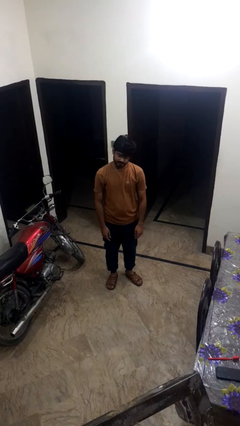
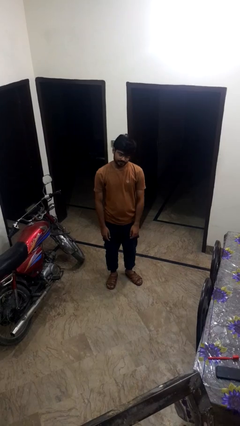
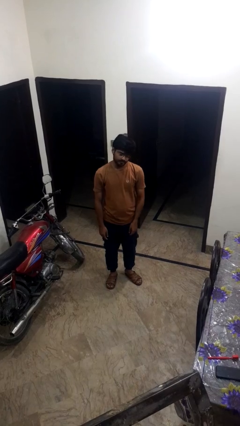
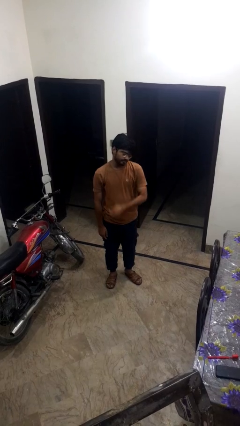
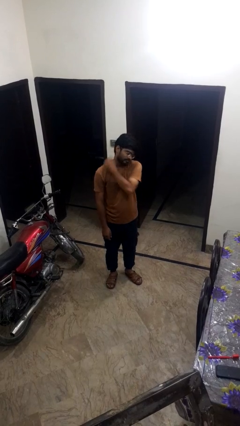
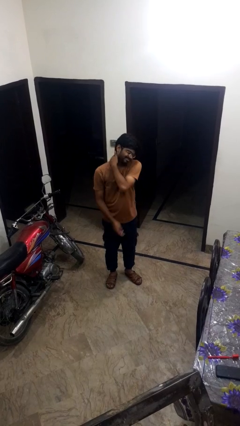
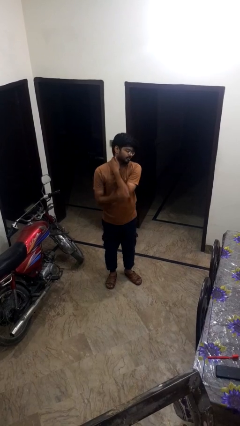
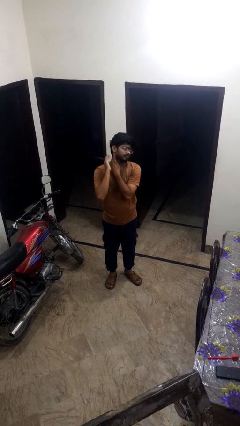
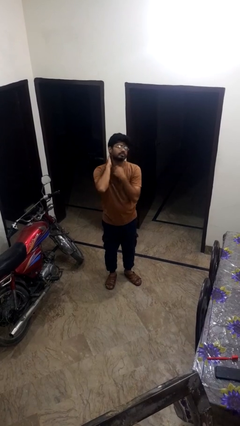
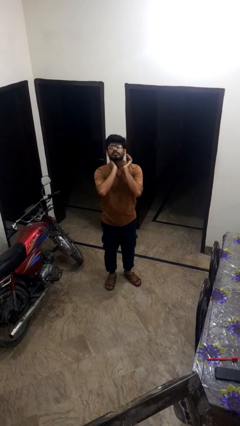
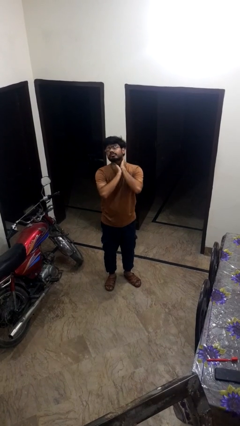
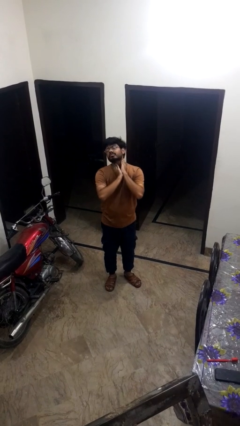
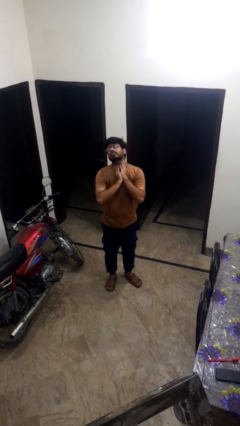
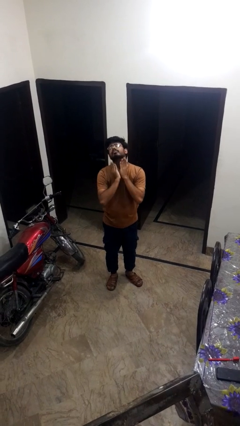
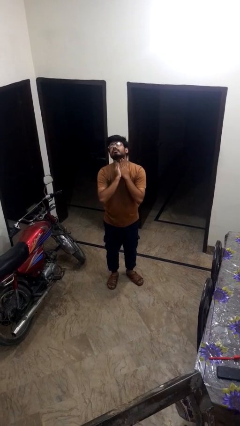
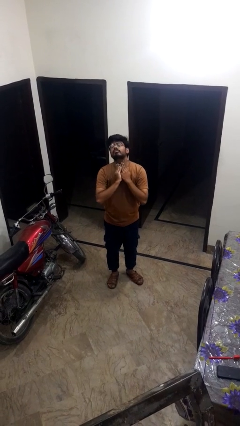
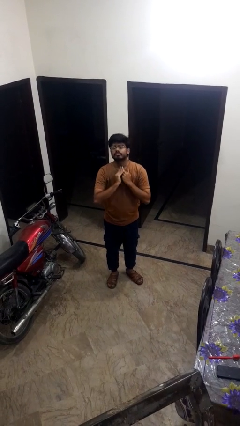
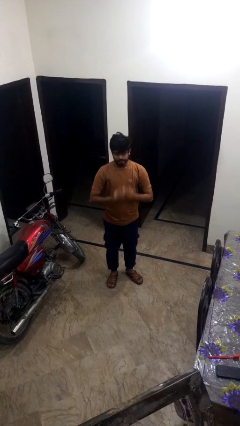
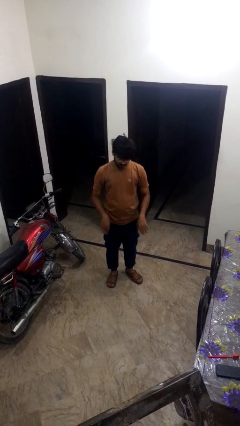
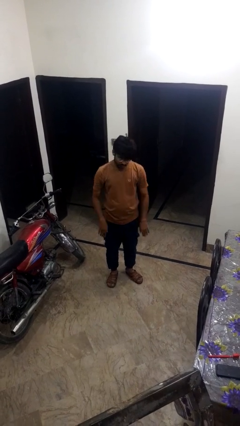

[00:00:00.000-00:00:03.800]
person rubs neck

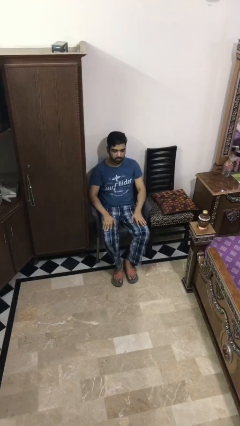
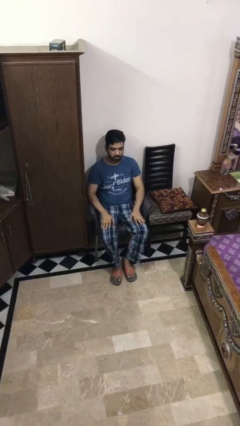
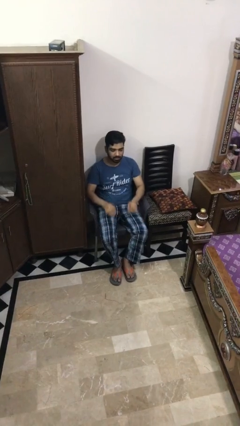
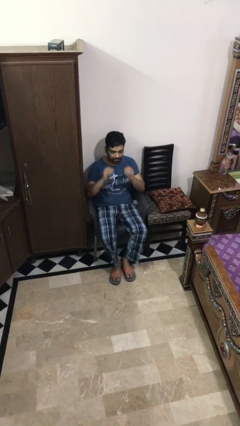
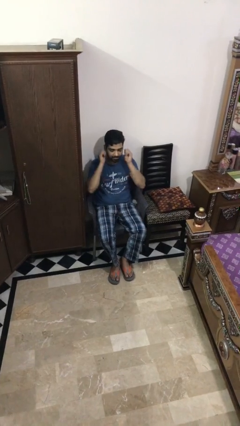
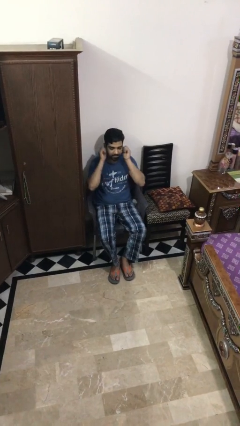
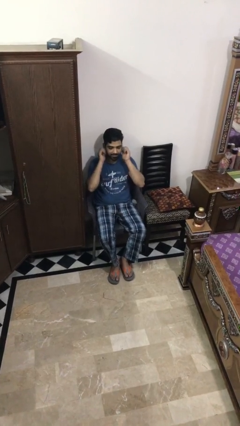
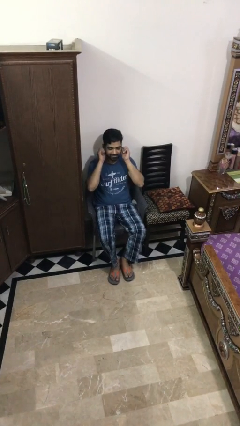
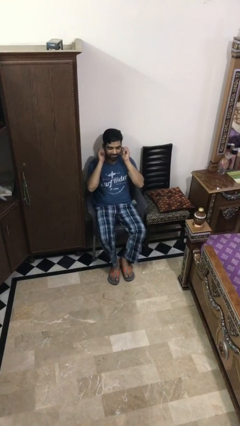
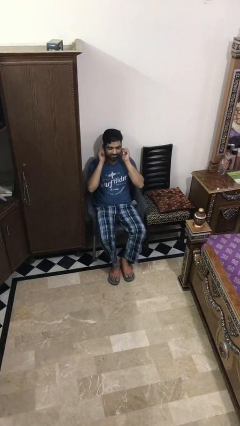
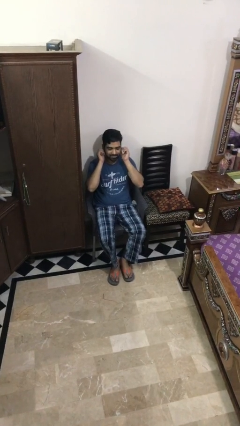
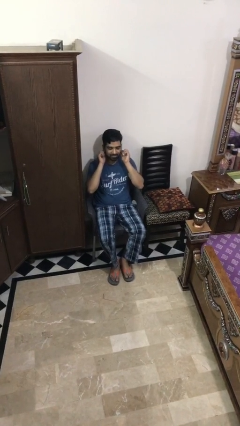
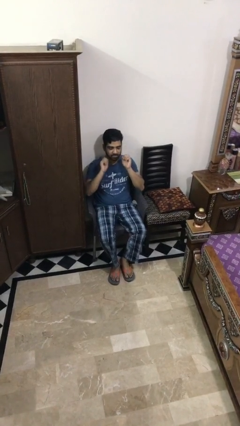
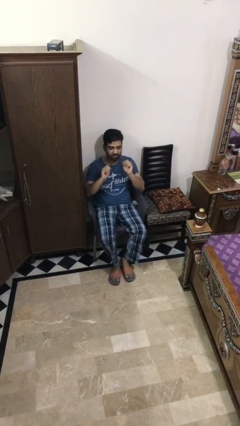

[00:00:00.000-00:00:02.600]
person touches earlobe

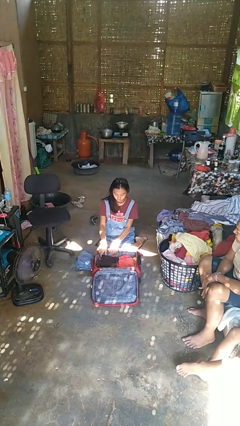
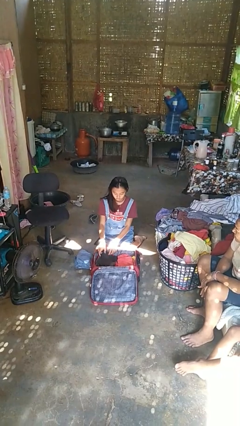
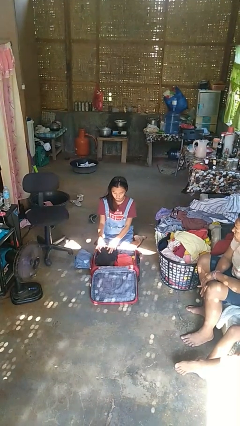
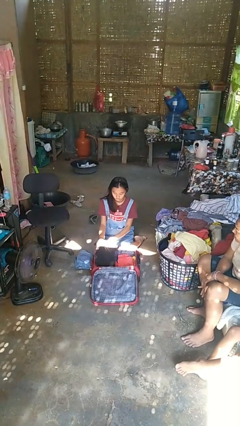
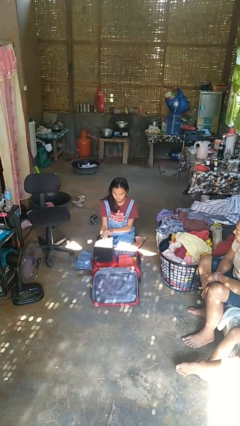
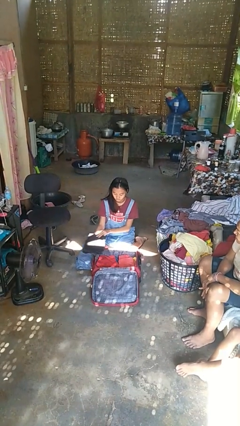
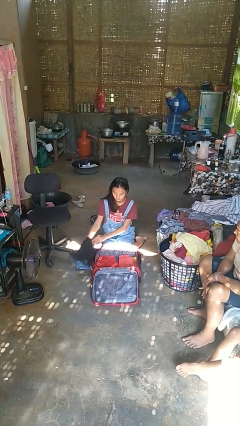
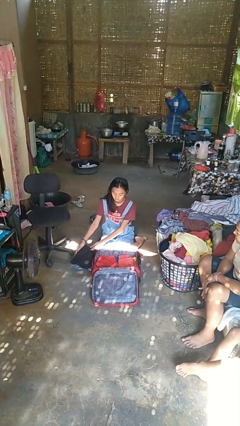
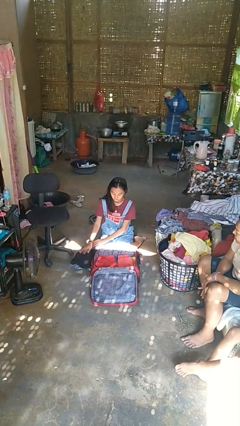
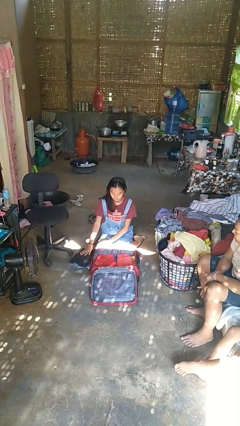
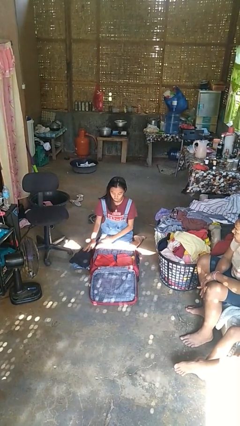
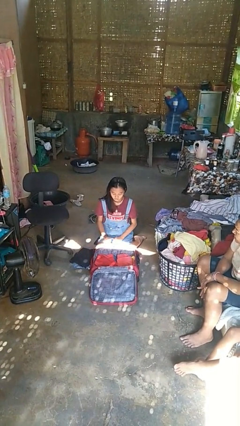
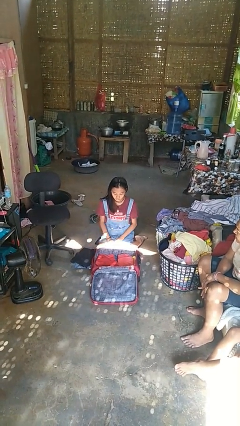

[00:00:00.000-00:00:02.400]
person unloads clothes from suitcase

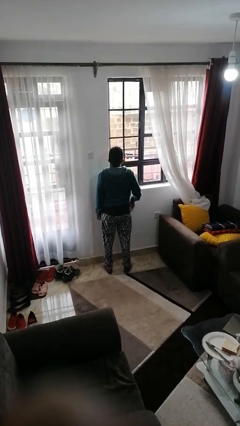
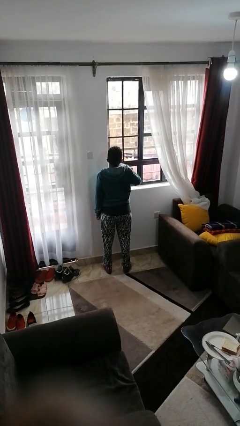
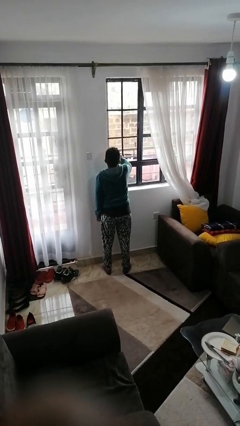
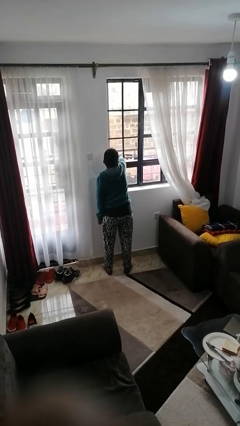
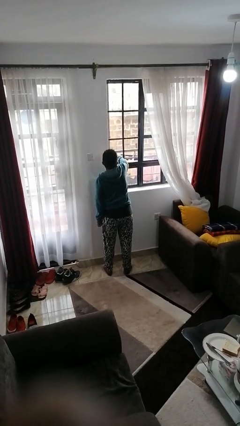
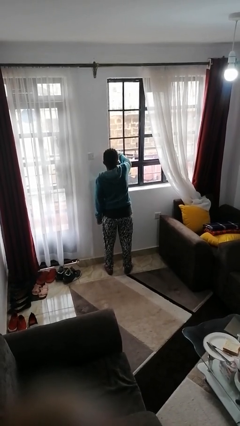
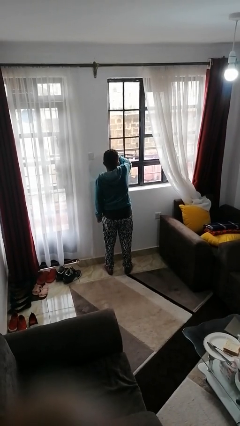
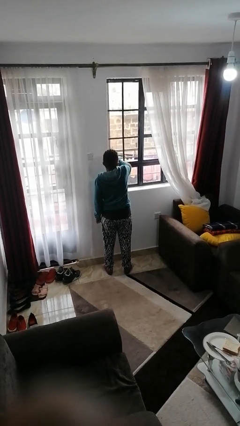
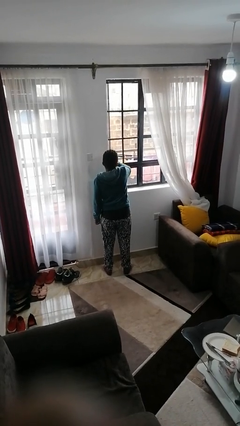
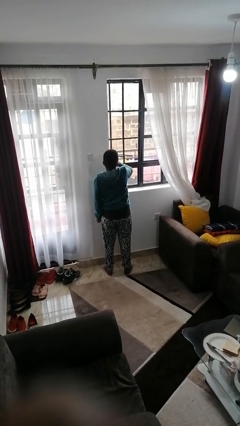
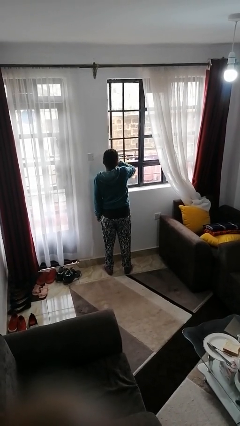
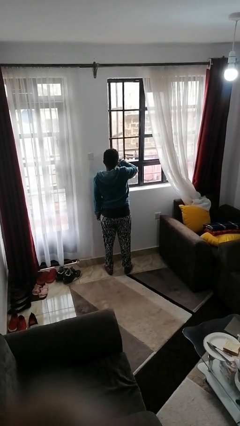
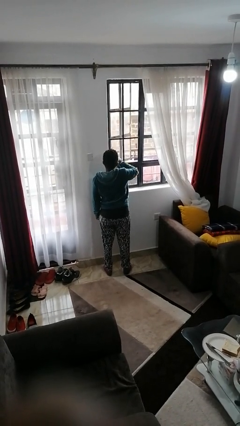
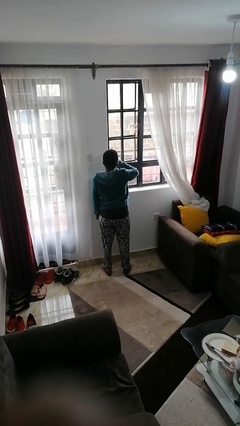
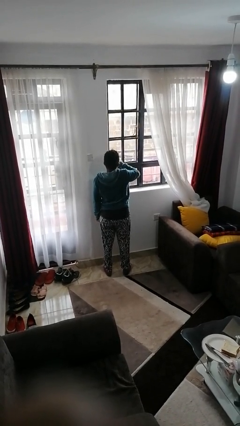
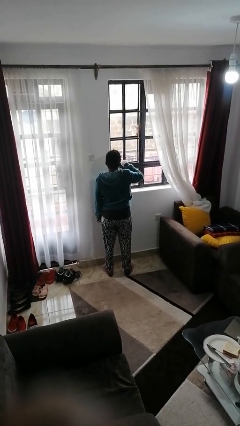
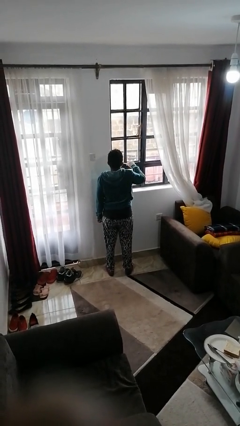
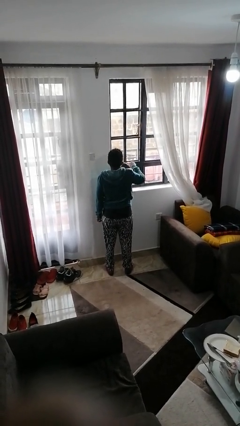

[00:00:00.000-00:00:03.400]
person closes home window

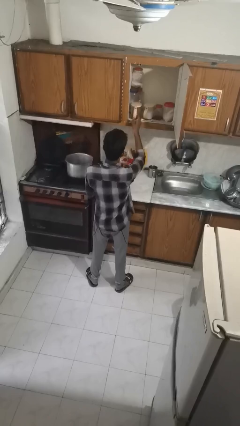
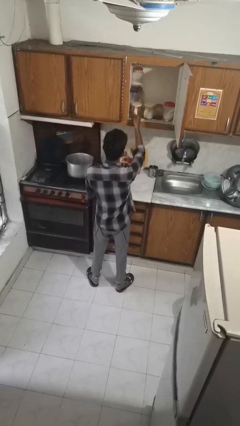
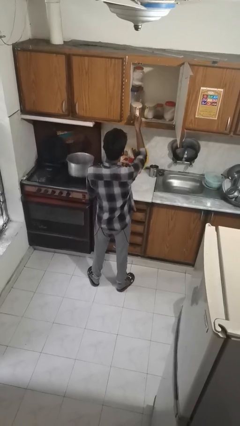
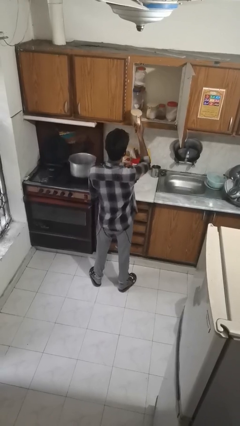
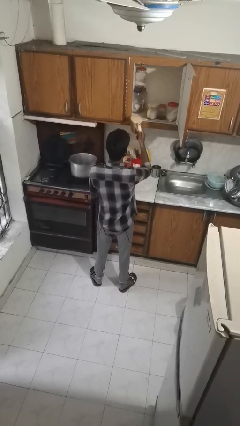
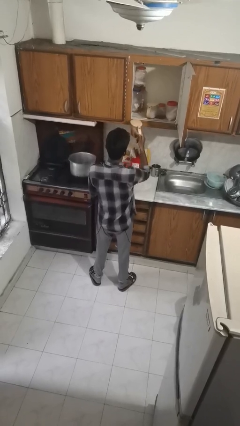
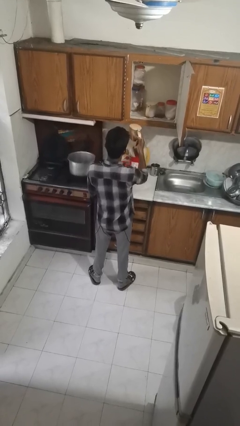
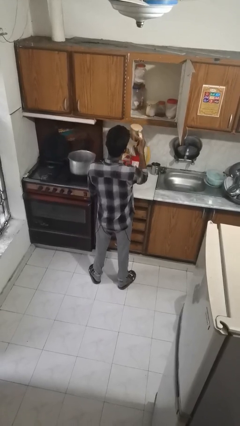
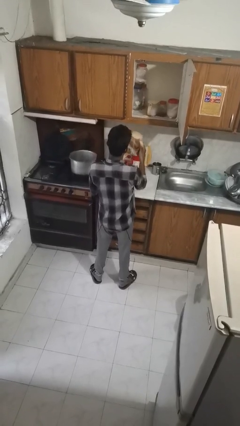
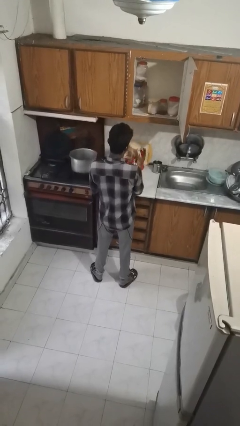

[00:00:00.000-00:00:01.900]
person picks up object from cabinet

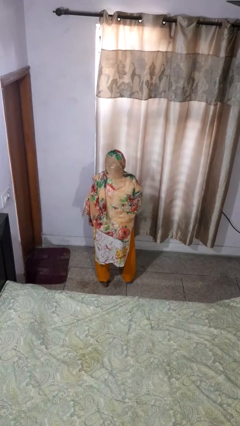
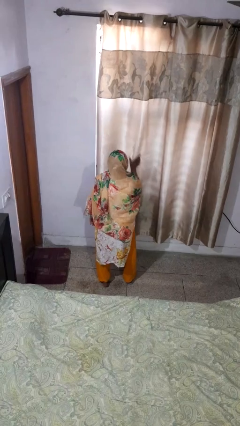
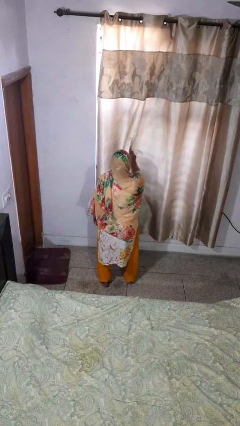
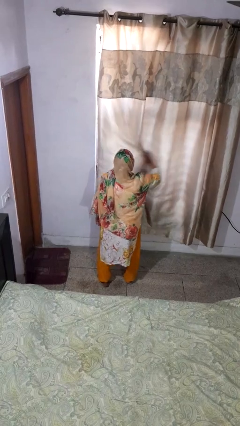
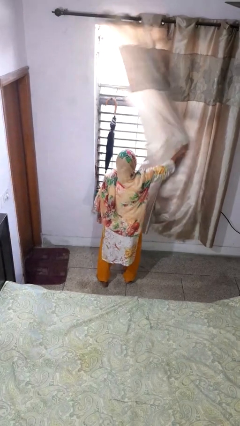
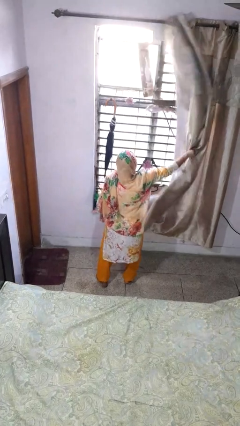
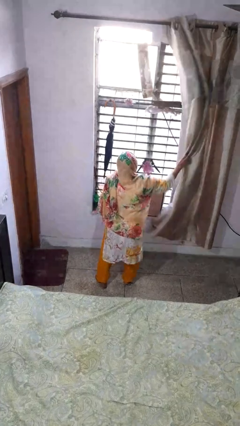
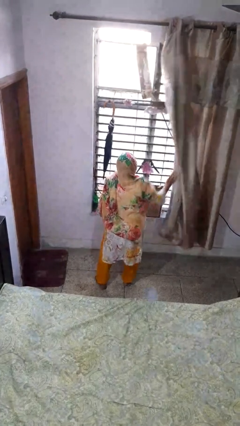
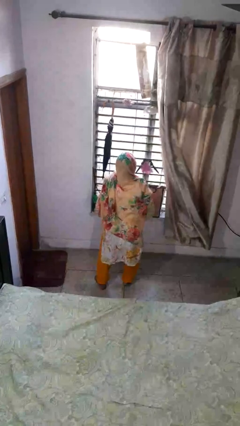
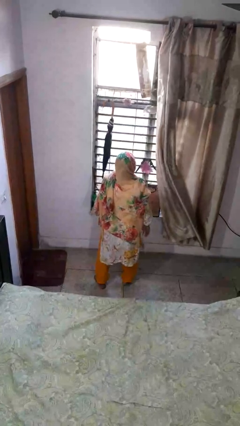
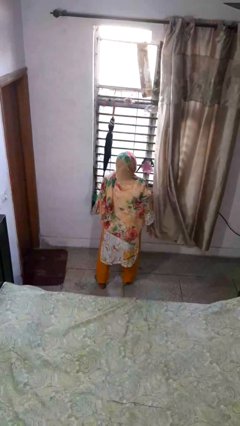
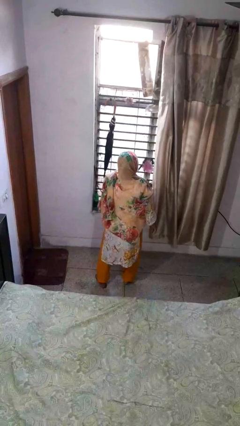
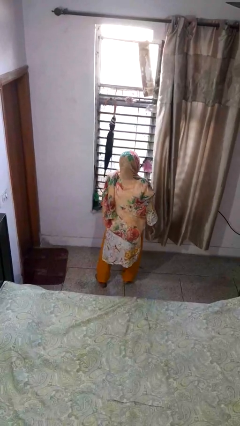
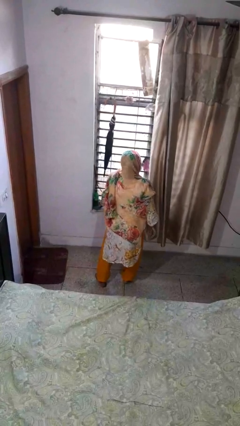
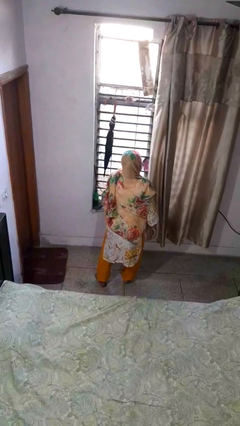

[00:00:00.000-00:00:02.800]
person opens curtains

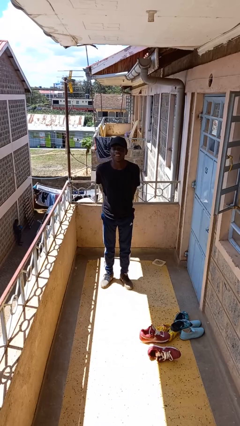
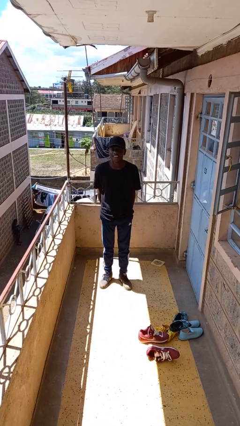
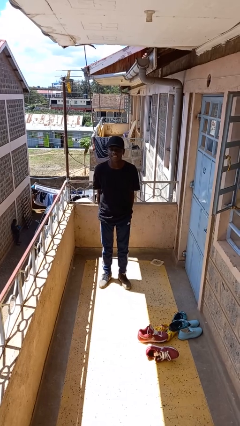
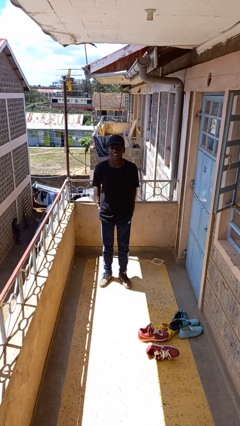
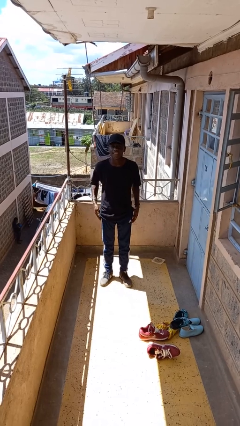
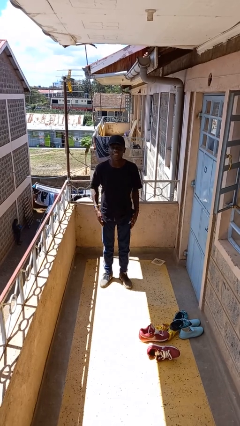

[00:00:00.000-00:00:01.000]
person puts hands in back pockets
